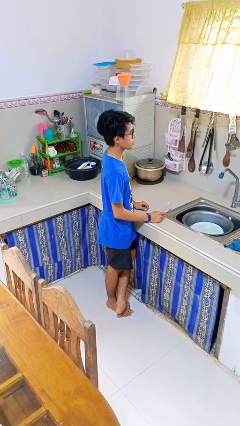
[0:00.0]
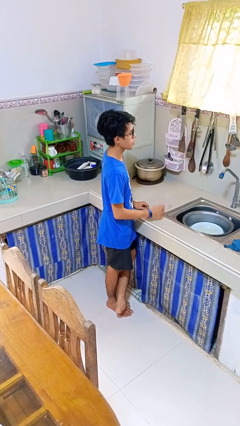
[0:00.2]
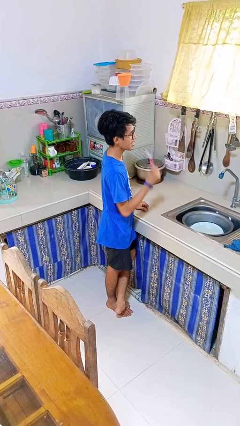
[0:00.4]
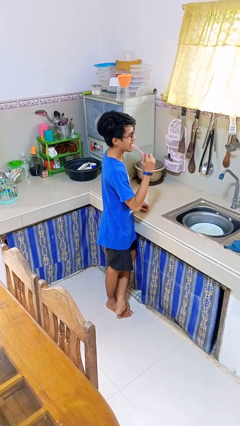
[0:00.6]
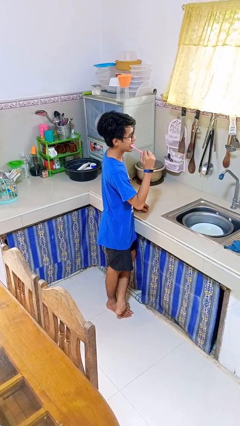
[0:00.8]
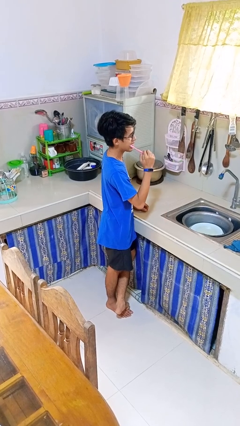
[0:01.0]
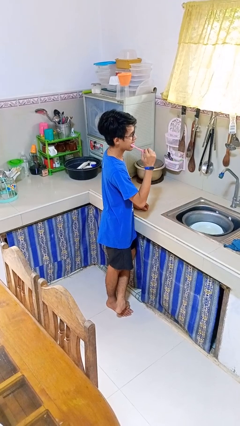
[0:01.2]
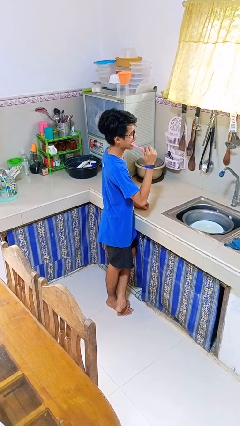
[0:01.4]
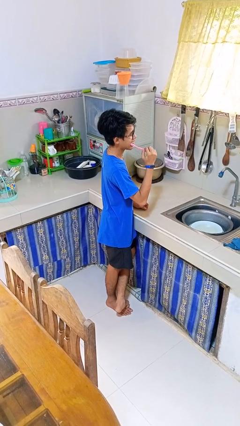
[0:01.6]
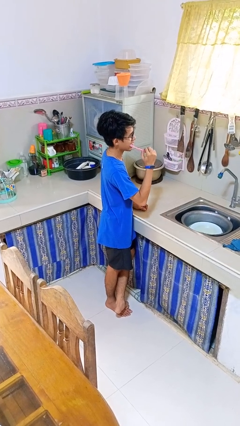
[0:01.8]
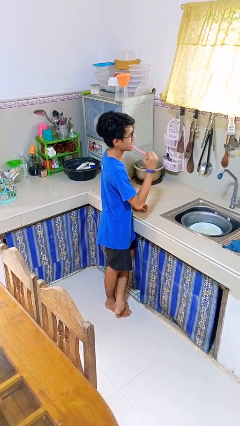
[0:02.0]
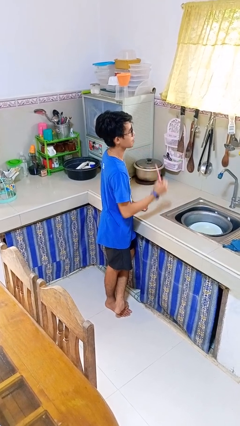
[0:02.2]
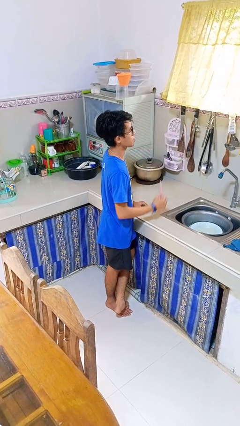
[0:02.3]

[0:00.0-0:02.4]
person brushes teeth

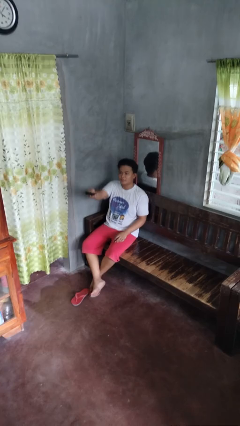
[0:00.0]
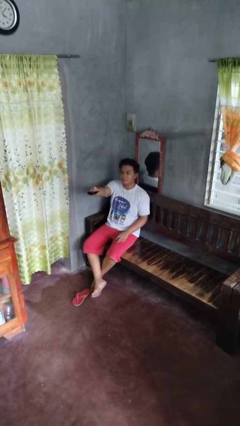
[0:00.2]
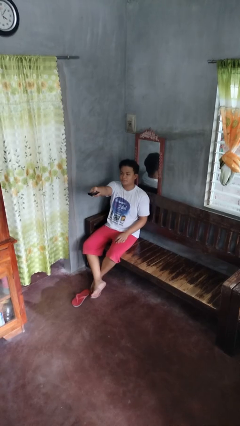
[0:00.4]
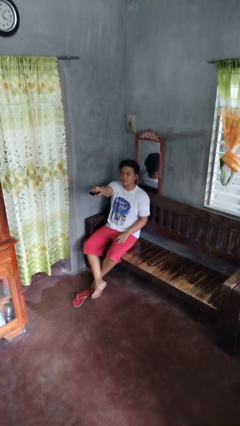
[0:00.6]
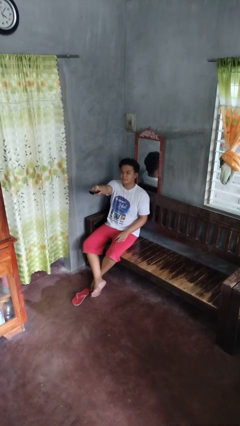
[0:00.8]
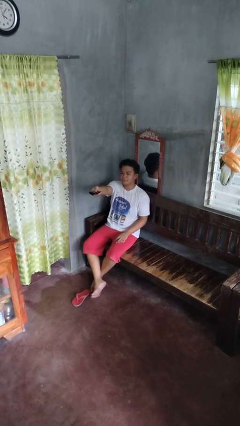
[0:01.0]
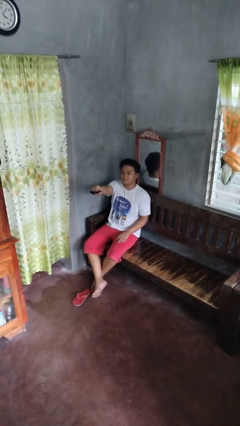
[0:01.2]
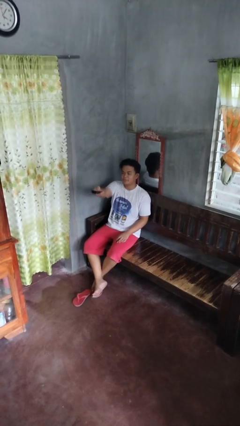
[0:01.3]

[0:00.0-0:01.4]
person uses television remote

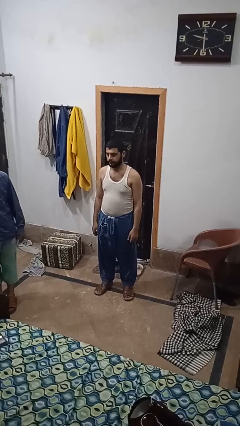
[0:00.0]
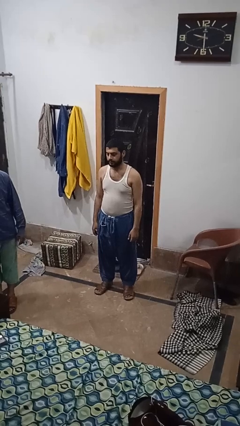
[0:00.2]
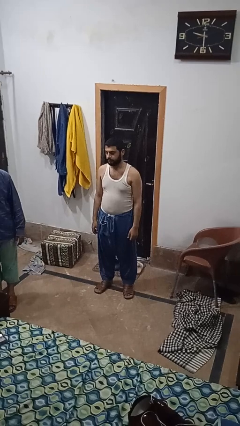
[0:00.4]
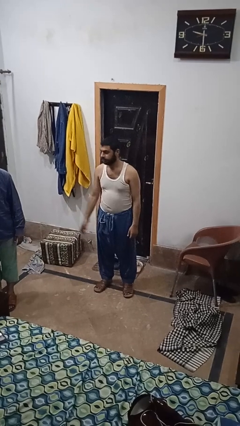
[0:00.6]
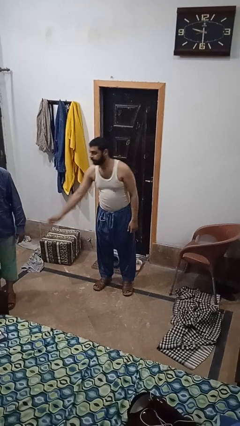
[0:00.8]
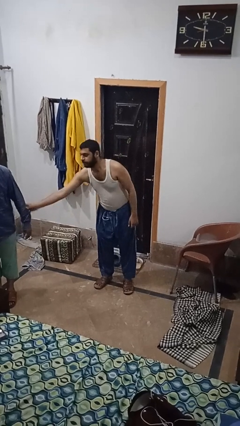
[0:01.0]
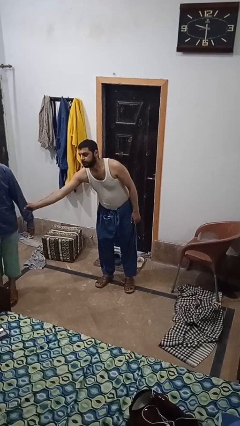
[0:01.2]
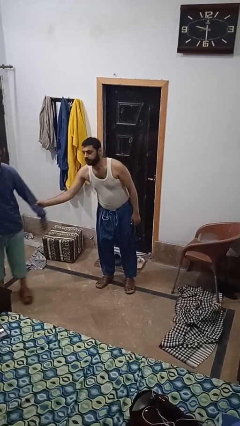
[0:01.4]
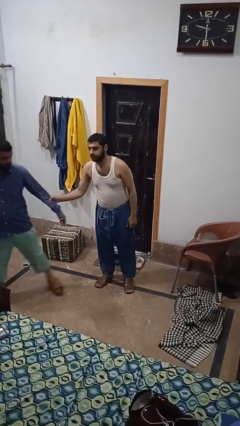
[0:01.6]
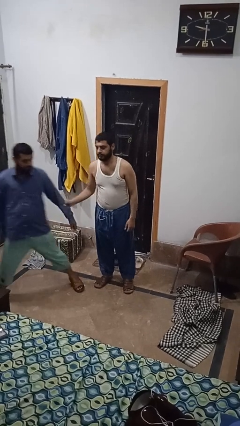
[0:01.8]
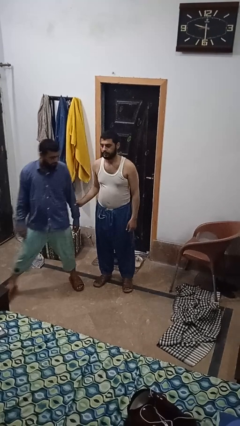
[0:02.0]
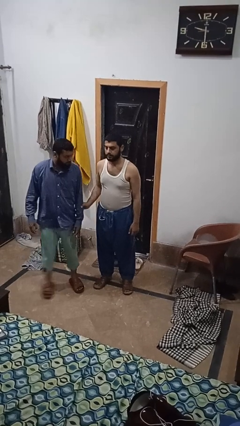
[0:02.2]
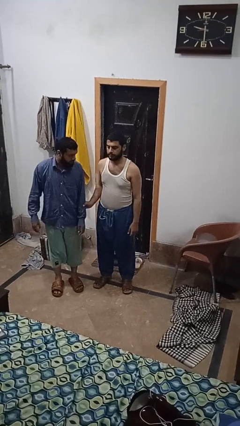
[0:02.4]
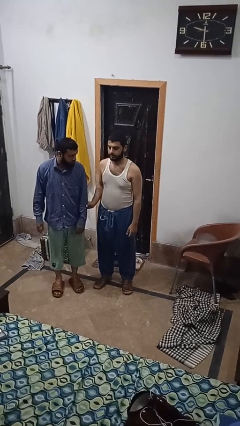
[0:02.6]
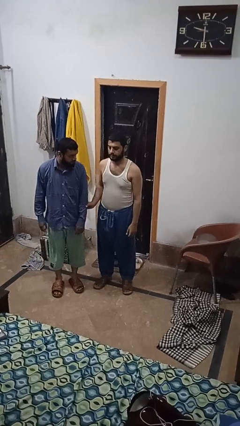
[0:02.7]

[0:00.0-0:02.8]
person grabs person by forearm

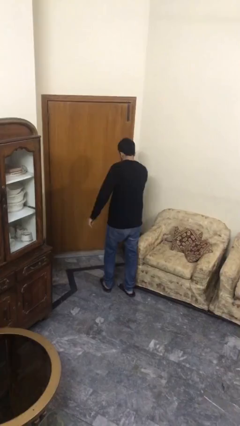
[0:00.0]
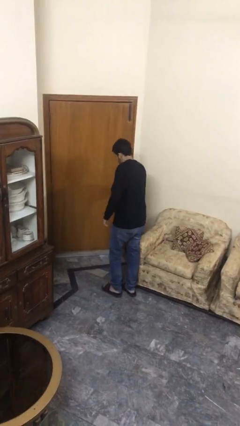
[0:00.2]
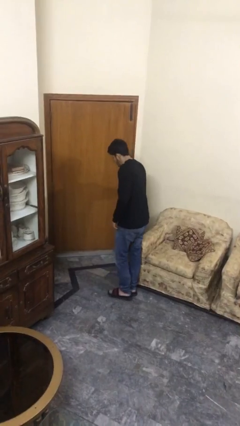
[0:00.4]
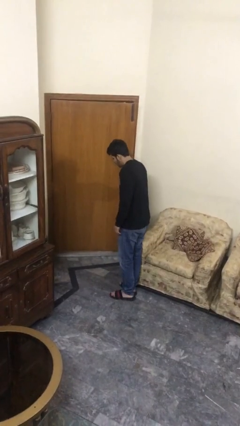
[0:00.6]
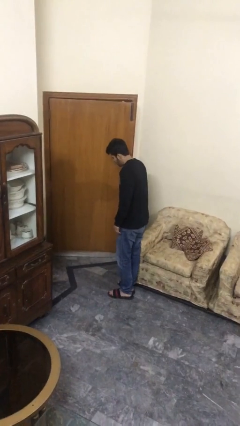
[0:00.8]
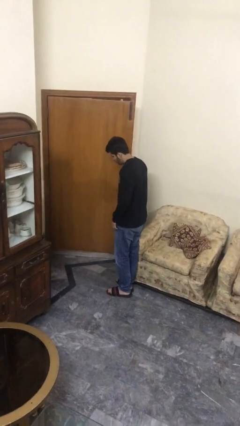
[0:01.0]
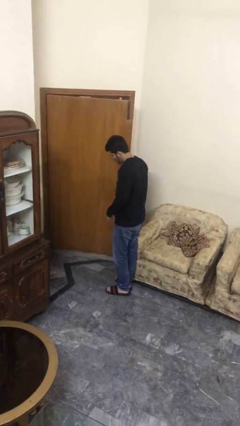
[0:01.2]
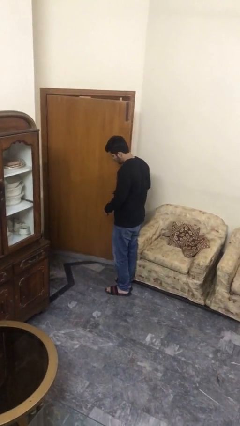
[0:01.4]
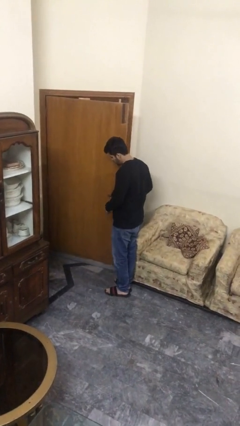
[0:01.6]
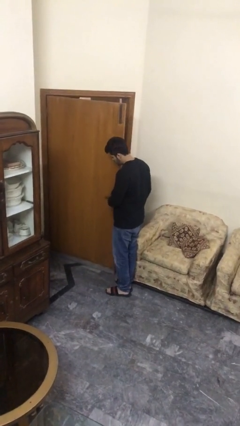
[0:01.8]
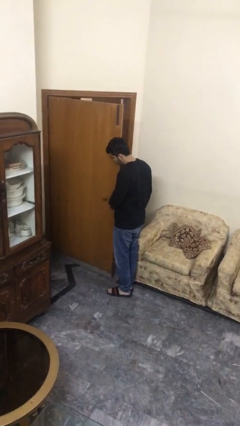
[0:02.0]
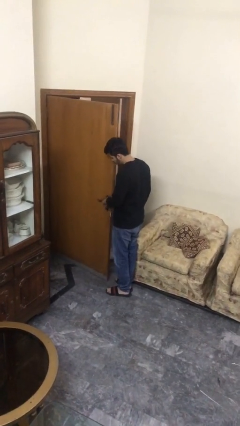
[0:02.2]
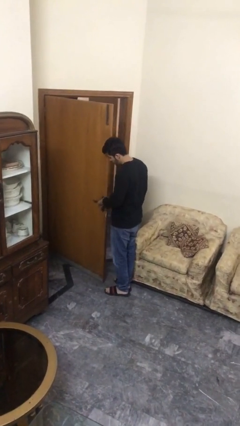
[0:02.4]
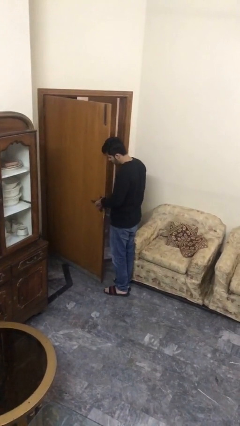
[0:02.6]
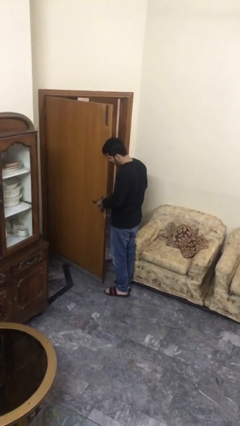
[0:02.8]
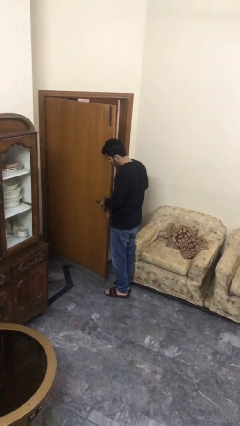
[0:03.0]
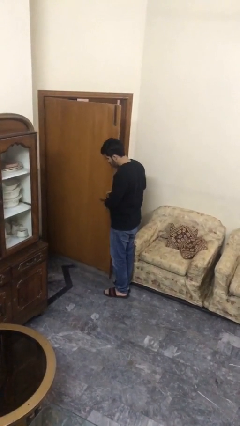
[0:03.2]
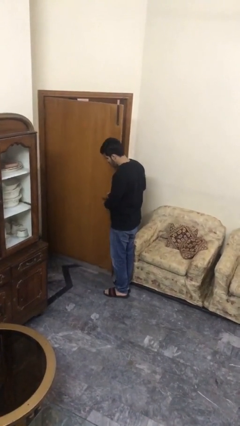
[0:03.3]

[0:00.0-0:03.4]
person opens facility door

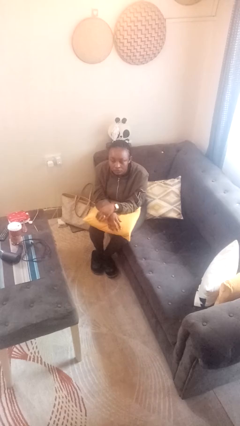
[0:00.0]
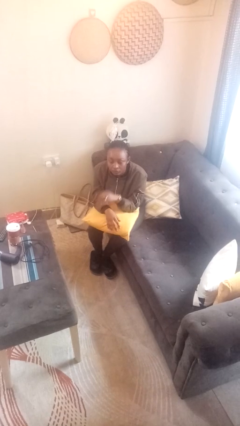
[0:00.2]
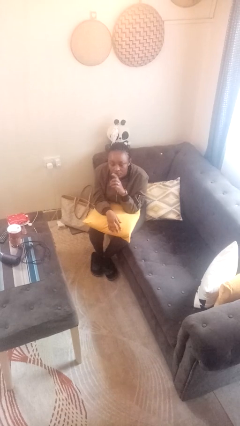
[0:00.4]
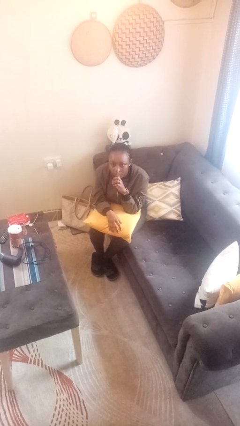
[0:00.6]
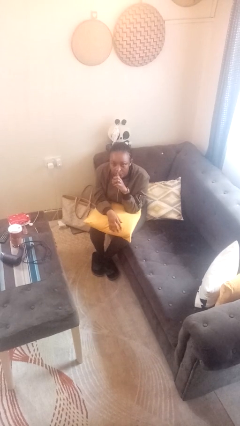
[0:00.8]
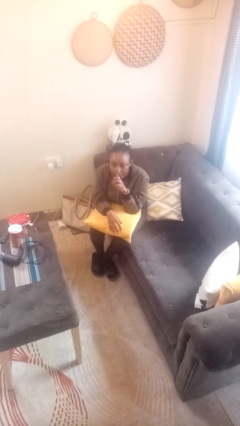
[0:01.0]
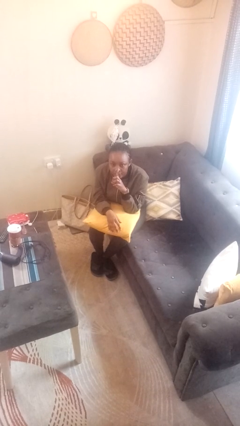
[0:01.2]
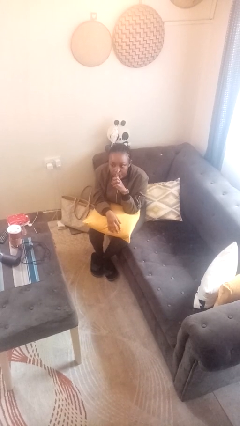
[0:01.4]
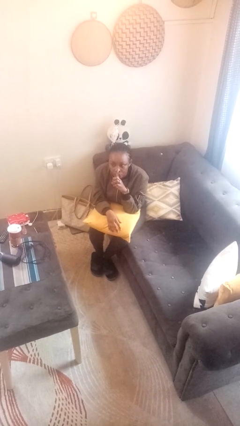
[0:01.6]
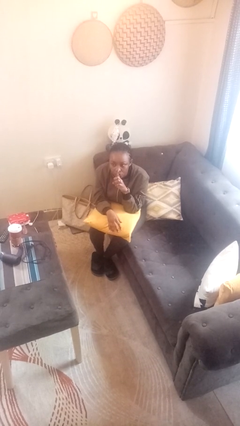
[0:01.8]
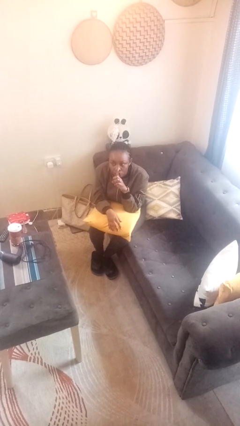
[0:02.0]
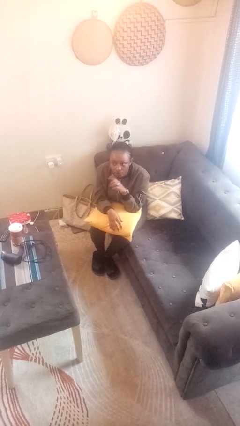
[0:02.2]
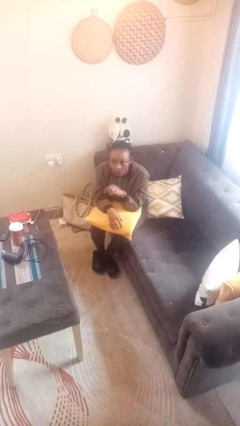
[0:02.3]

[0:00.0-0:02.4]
person gestures be quiet

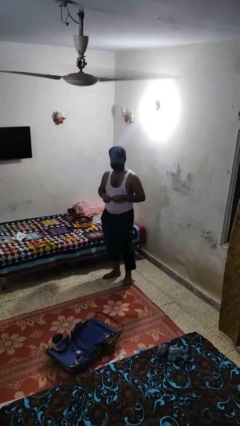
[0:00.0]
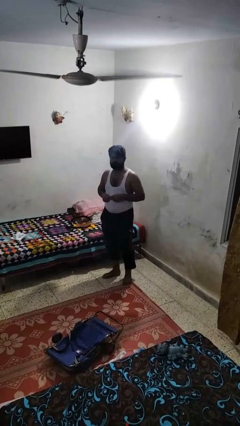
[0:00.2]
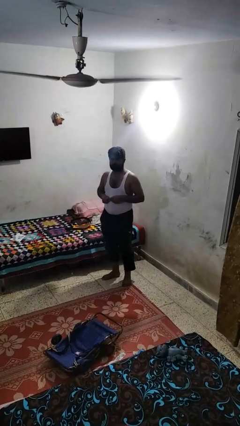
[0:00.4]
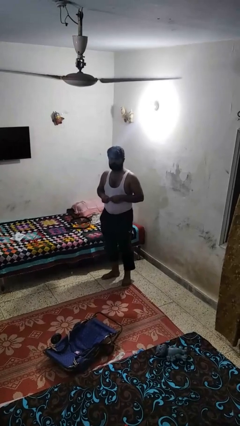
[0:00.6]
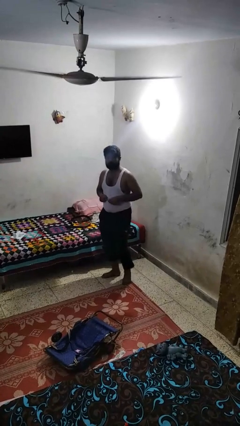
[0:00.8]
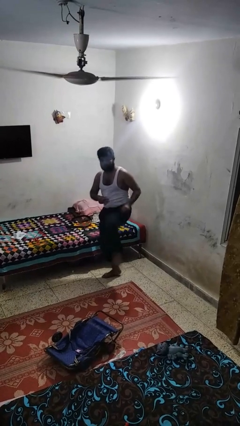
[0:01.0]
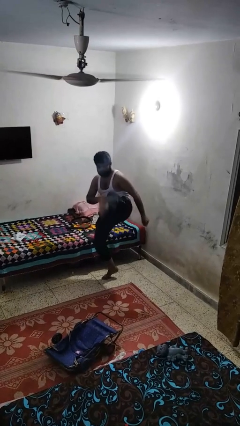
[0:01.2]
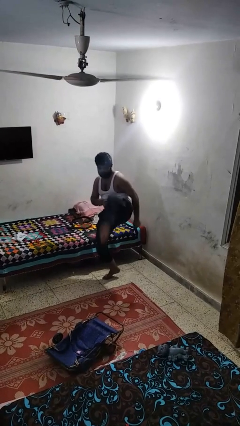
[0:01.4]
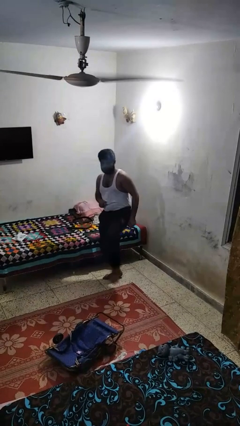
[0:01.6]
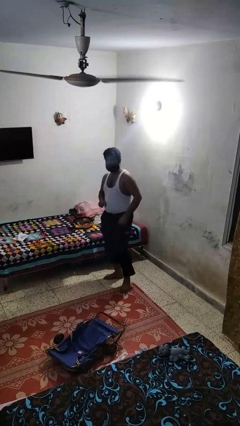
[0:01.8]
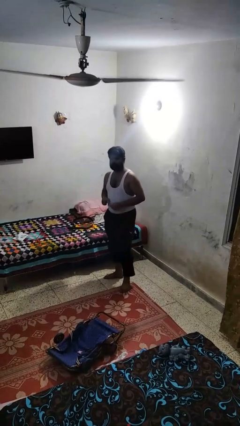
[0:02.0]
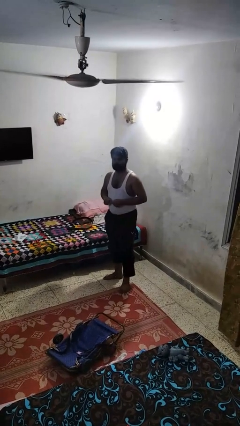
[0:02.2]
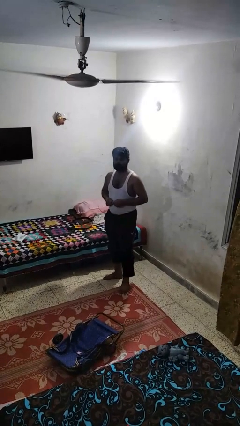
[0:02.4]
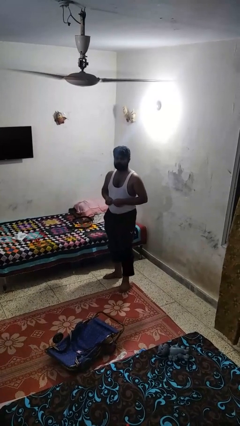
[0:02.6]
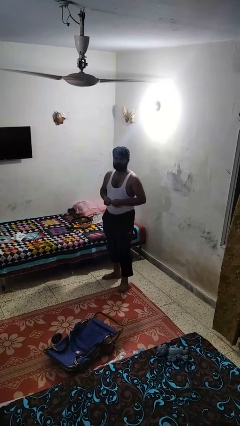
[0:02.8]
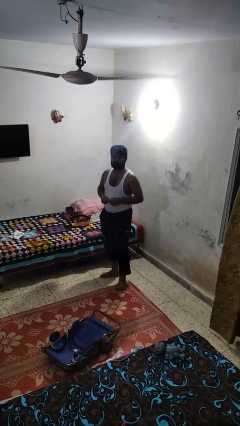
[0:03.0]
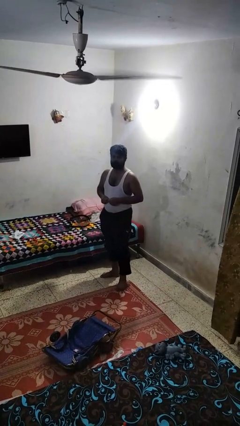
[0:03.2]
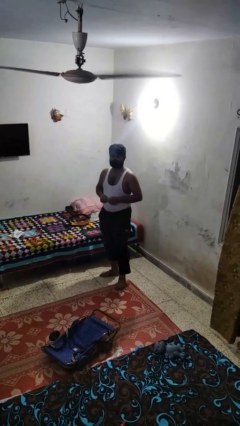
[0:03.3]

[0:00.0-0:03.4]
person karate kicks

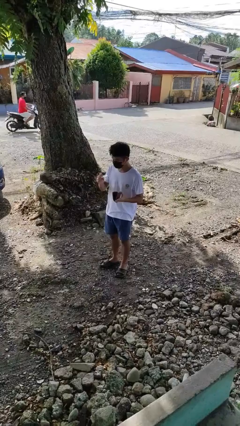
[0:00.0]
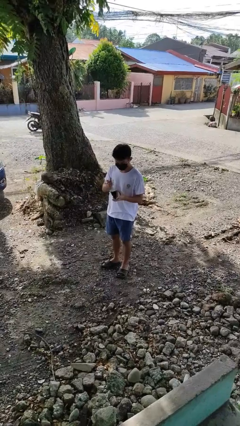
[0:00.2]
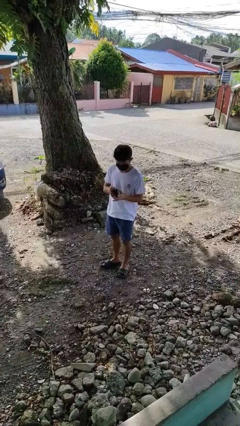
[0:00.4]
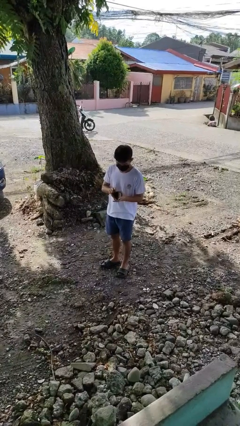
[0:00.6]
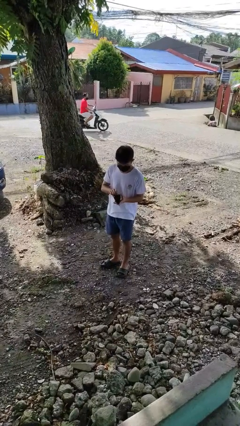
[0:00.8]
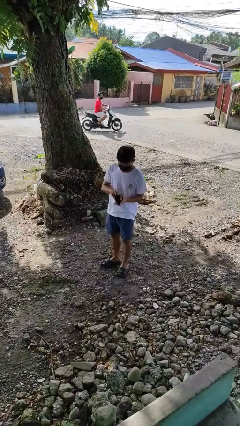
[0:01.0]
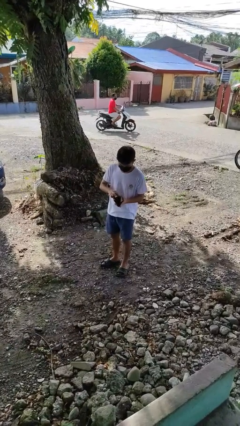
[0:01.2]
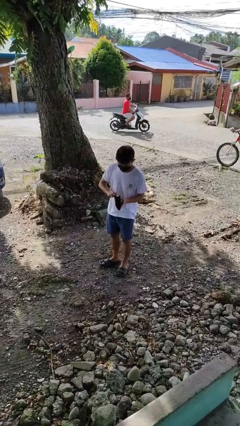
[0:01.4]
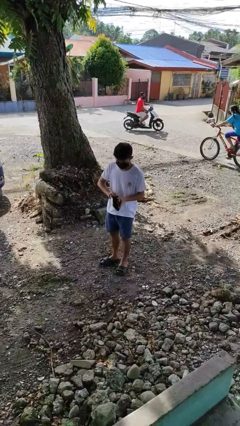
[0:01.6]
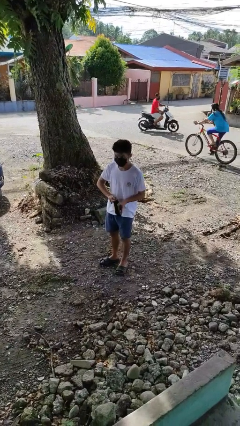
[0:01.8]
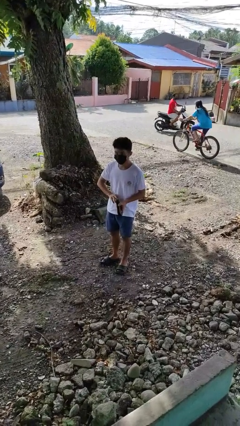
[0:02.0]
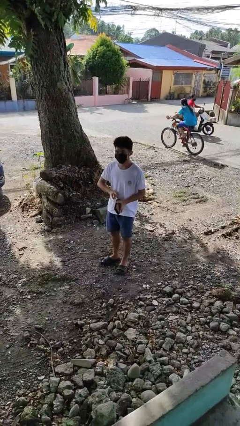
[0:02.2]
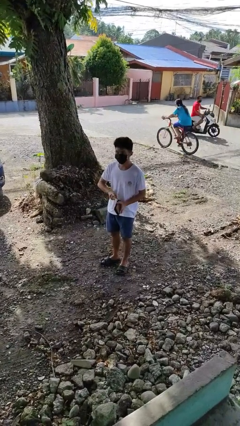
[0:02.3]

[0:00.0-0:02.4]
person puts object into purse
